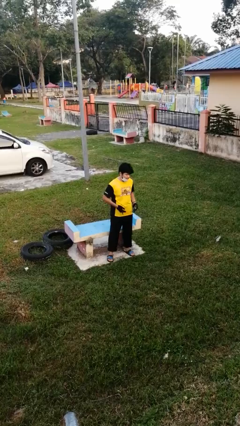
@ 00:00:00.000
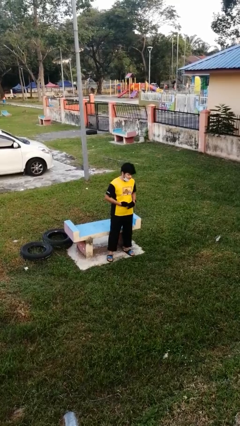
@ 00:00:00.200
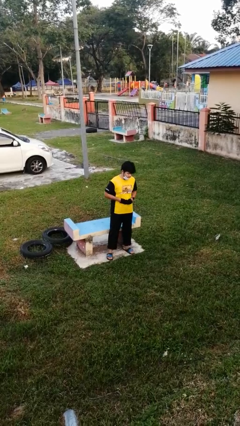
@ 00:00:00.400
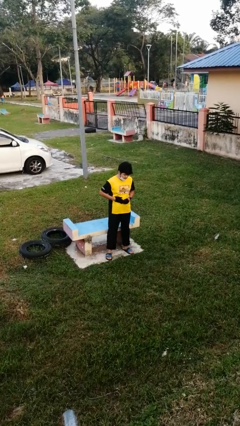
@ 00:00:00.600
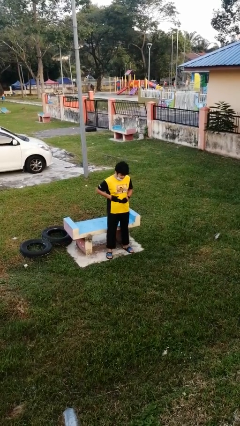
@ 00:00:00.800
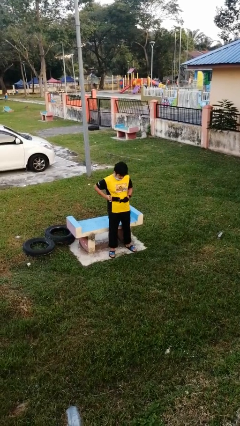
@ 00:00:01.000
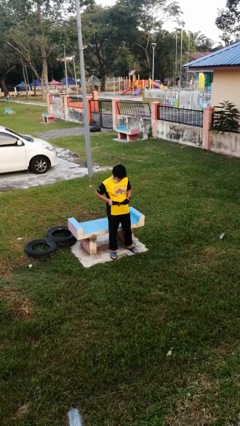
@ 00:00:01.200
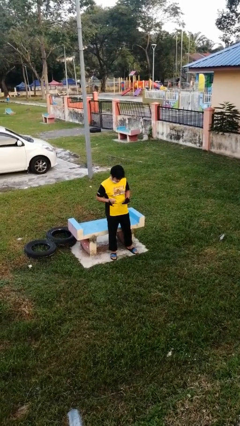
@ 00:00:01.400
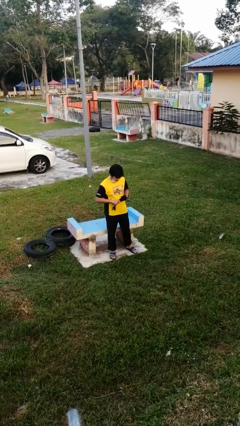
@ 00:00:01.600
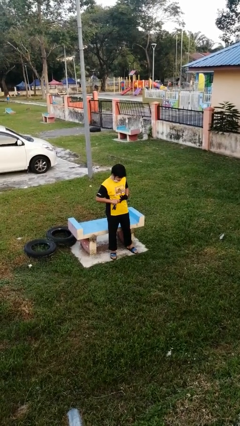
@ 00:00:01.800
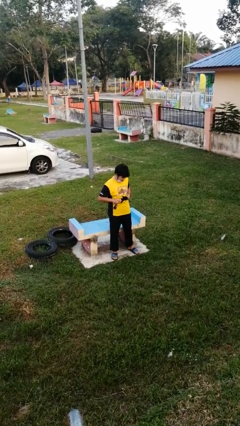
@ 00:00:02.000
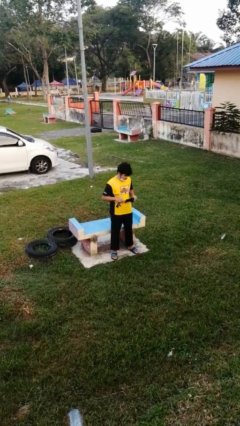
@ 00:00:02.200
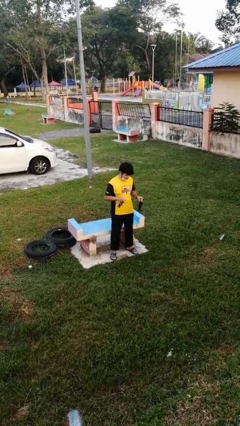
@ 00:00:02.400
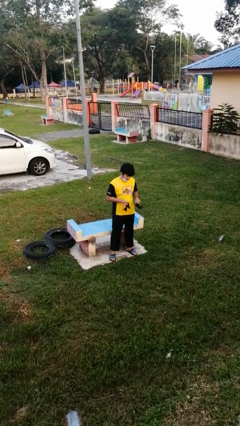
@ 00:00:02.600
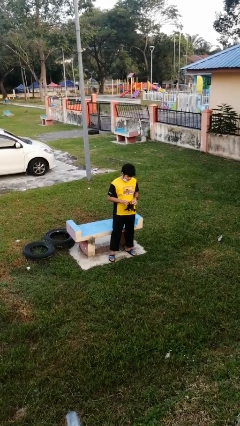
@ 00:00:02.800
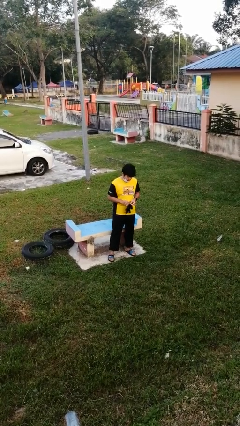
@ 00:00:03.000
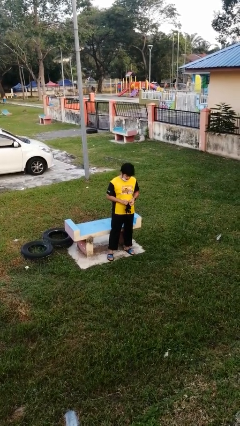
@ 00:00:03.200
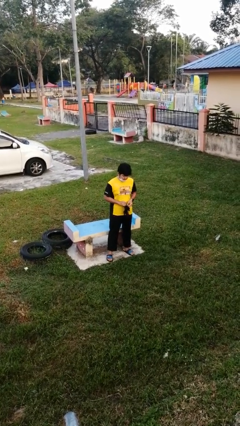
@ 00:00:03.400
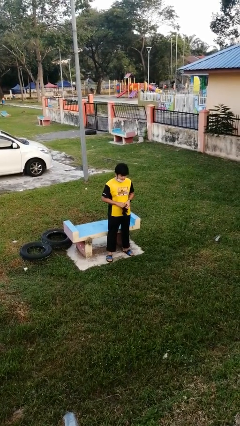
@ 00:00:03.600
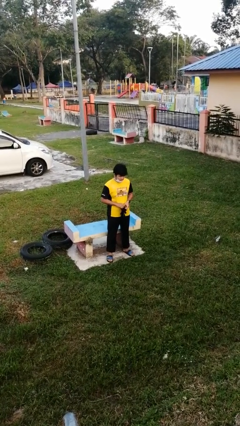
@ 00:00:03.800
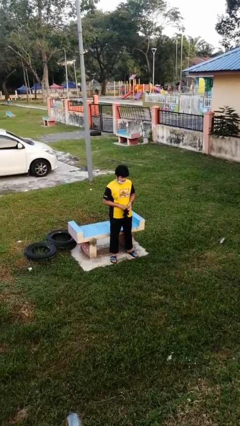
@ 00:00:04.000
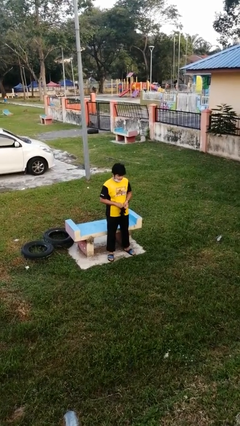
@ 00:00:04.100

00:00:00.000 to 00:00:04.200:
person takes off gloves

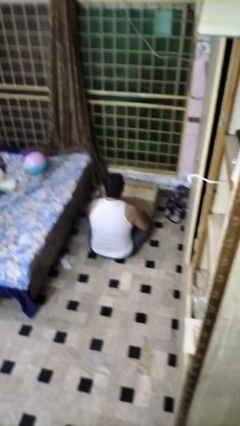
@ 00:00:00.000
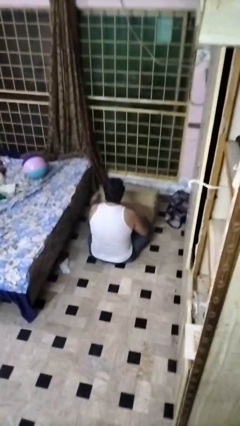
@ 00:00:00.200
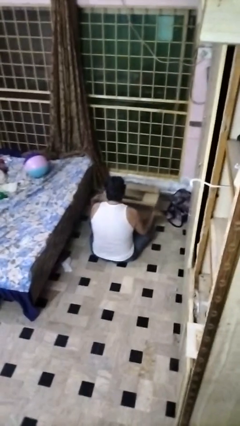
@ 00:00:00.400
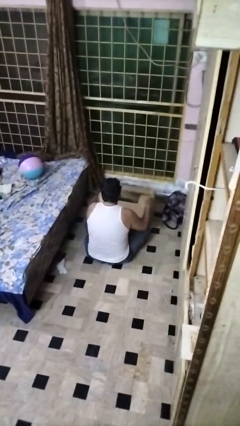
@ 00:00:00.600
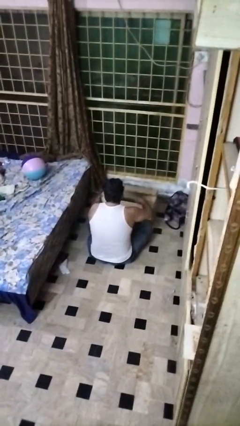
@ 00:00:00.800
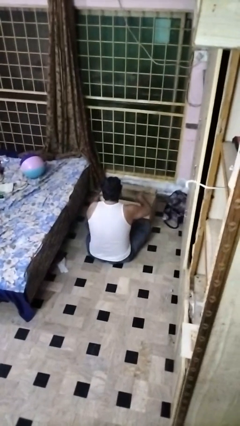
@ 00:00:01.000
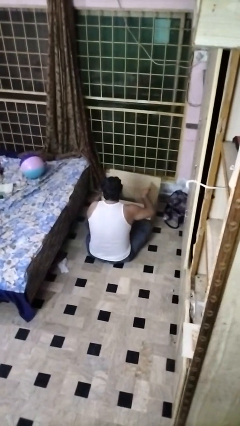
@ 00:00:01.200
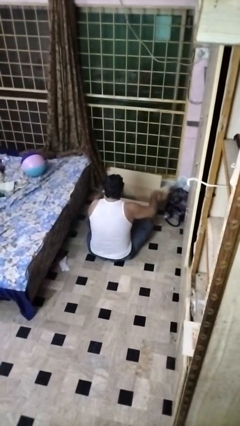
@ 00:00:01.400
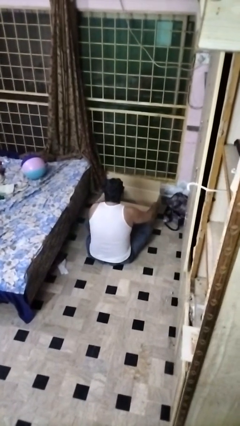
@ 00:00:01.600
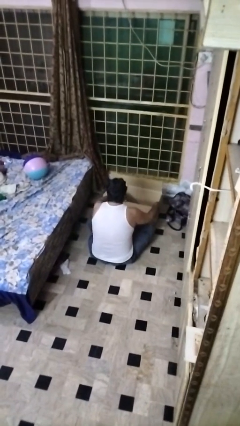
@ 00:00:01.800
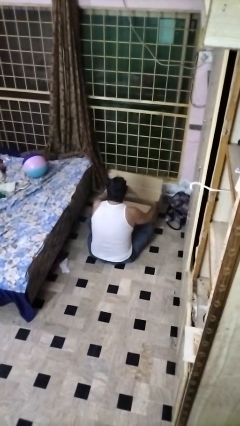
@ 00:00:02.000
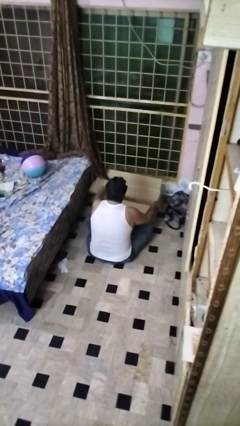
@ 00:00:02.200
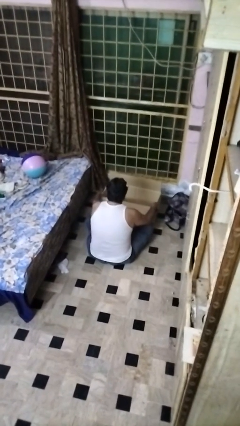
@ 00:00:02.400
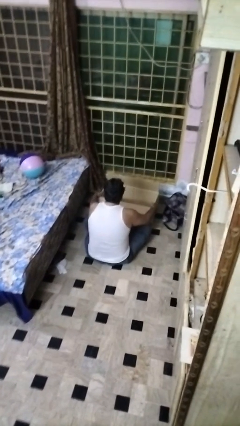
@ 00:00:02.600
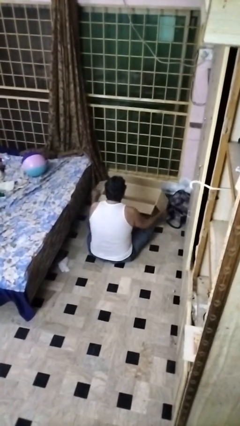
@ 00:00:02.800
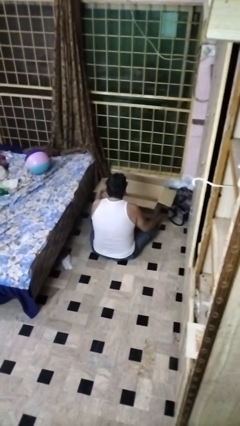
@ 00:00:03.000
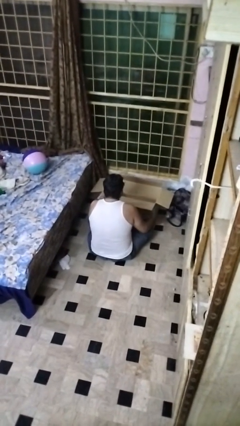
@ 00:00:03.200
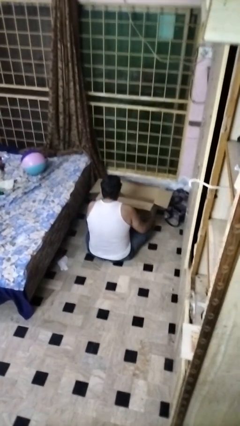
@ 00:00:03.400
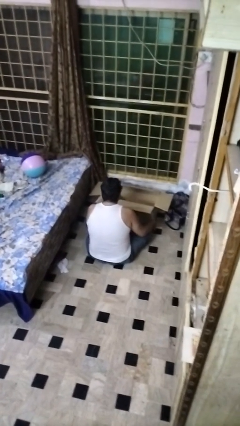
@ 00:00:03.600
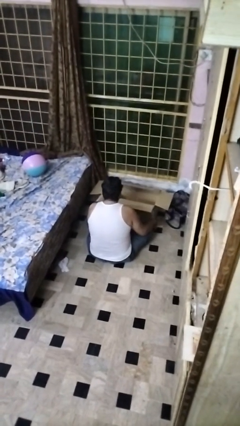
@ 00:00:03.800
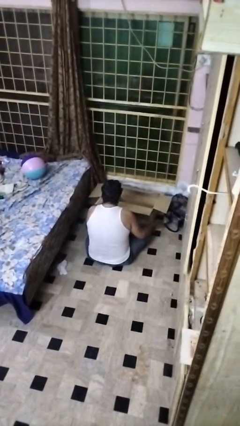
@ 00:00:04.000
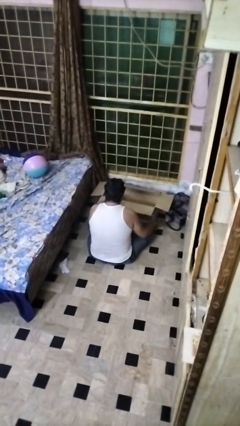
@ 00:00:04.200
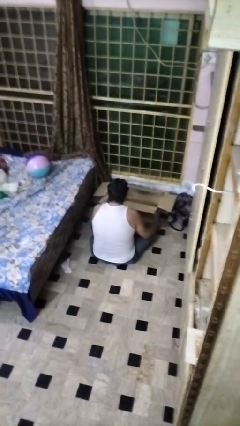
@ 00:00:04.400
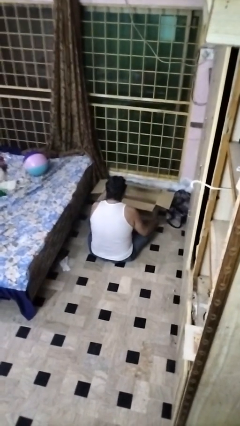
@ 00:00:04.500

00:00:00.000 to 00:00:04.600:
person opens box

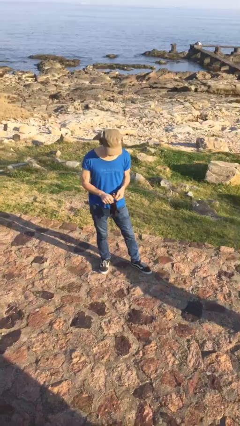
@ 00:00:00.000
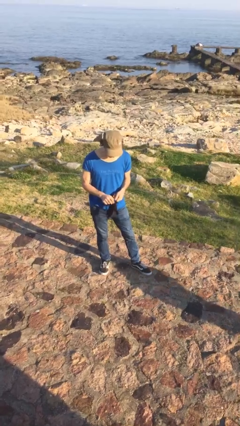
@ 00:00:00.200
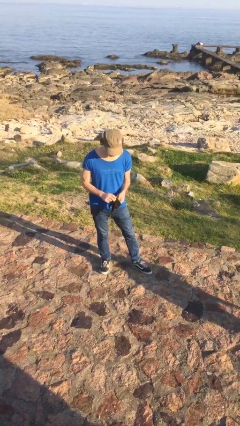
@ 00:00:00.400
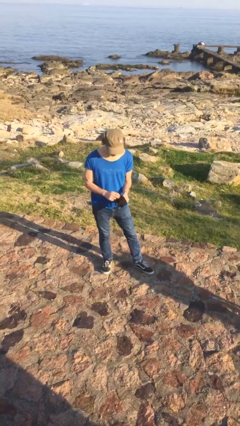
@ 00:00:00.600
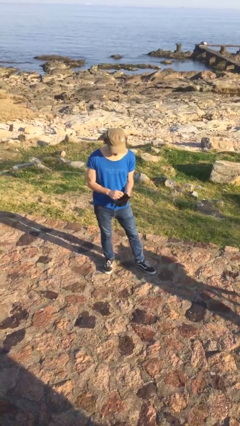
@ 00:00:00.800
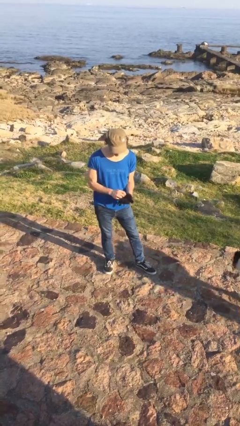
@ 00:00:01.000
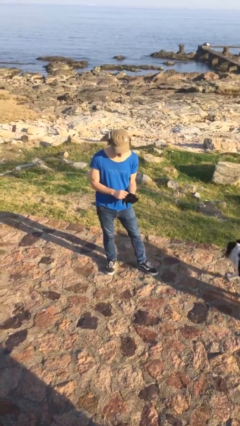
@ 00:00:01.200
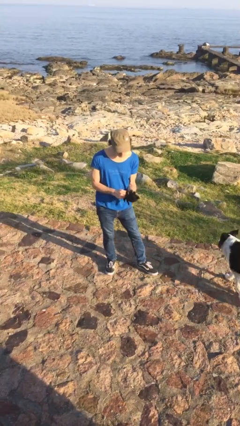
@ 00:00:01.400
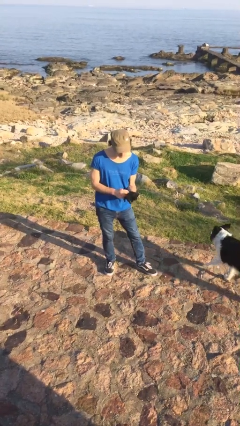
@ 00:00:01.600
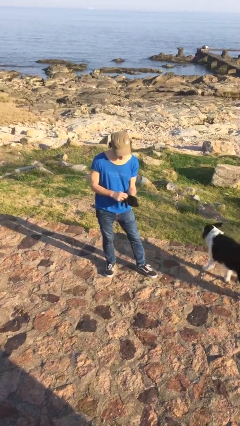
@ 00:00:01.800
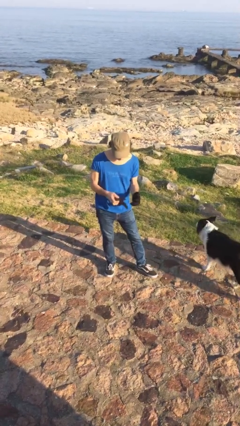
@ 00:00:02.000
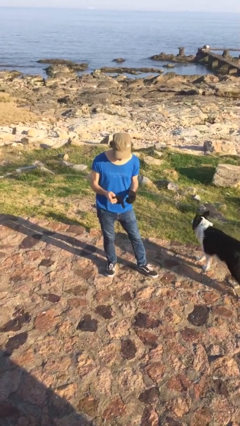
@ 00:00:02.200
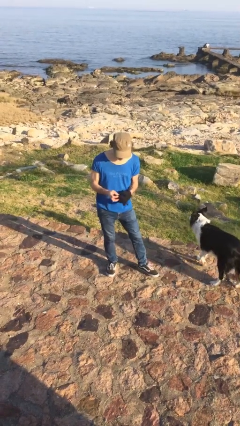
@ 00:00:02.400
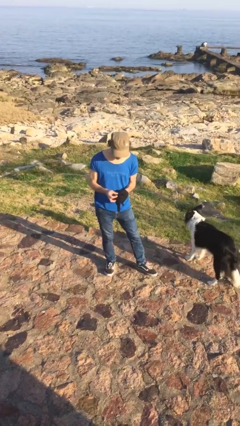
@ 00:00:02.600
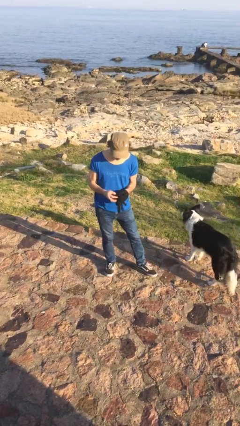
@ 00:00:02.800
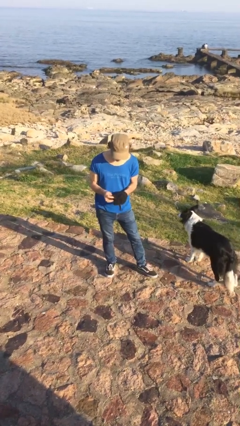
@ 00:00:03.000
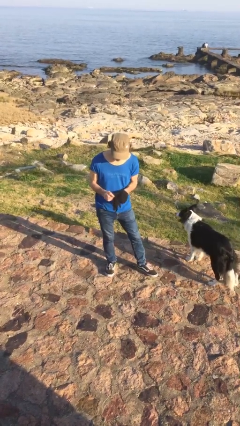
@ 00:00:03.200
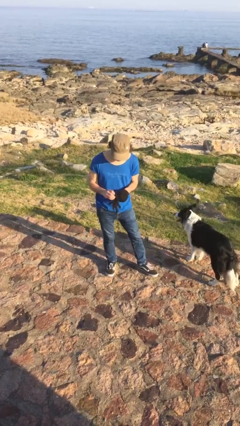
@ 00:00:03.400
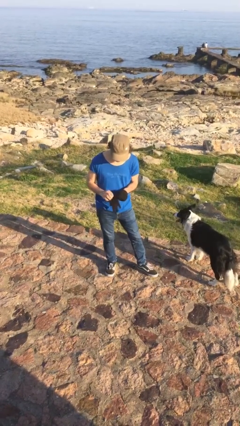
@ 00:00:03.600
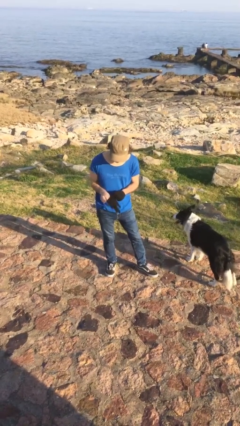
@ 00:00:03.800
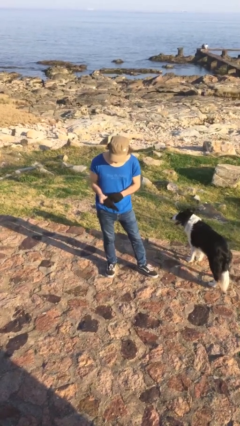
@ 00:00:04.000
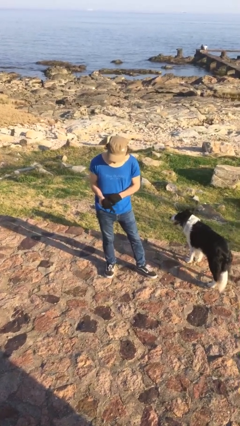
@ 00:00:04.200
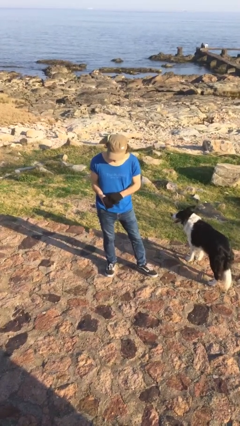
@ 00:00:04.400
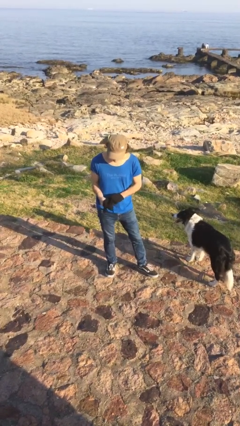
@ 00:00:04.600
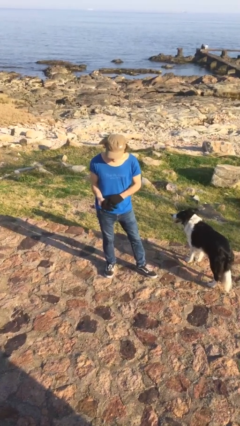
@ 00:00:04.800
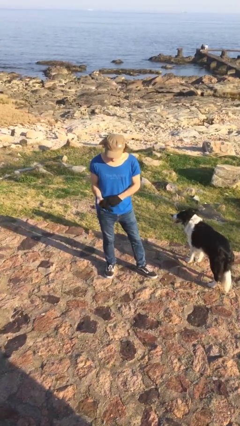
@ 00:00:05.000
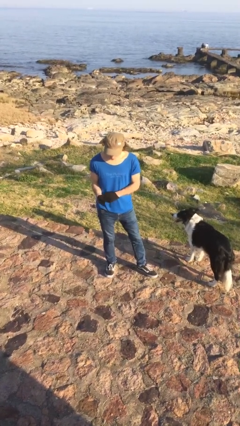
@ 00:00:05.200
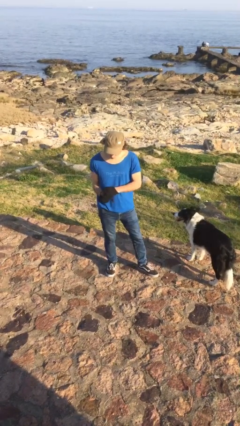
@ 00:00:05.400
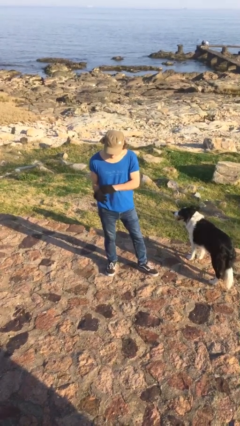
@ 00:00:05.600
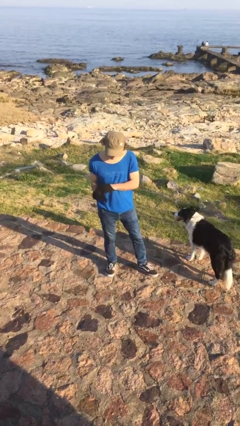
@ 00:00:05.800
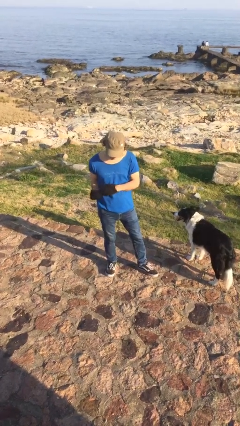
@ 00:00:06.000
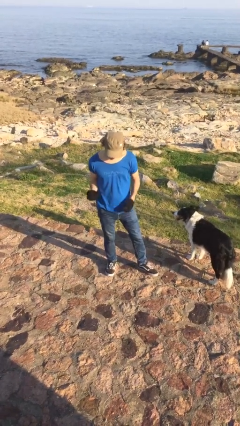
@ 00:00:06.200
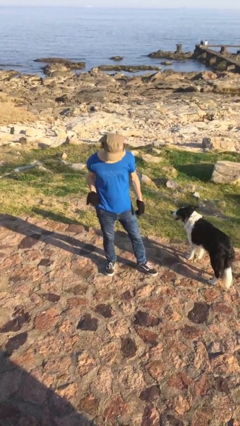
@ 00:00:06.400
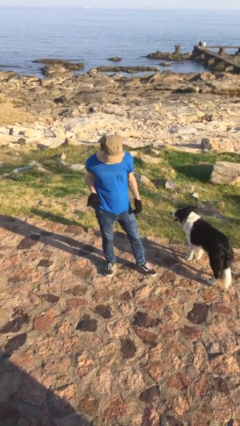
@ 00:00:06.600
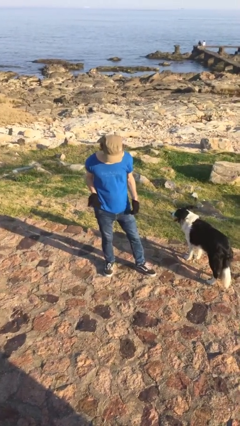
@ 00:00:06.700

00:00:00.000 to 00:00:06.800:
person puts on gloves

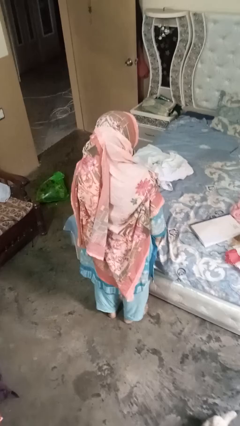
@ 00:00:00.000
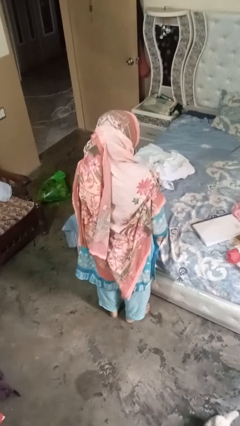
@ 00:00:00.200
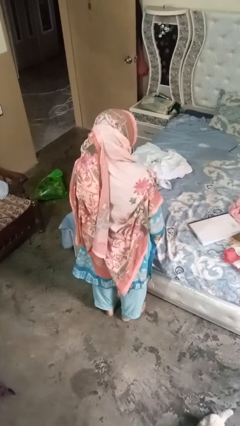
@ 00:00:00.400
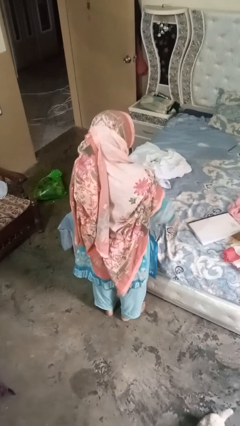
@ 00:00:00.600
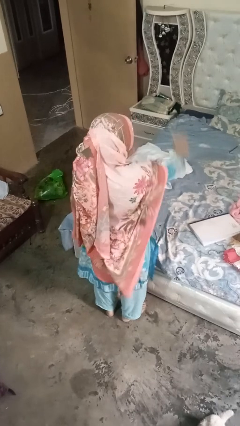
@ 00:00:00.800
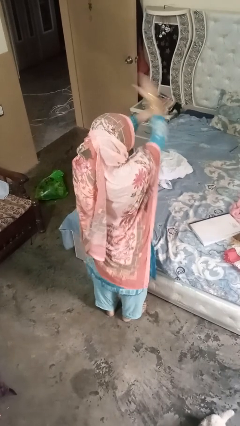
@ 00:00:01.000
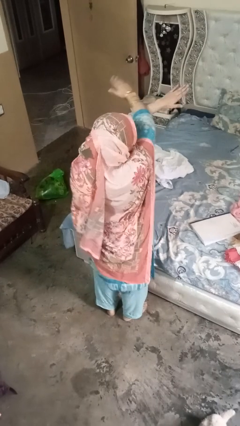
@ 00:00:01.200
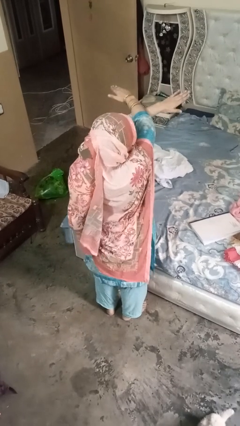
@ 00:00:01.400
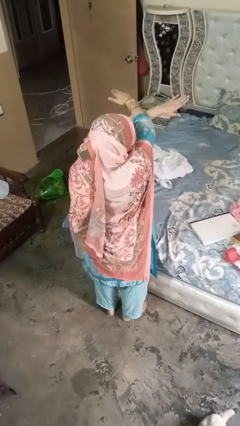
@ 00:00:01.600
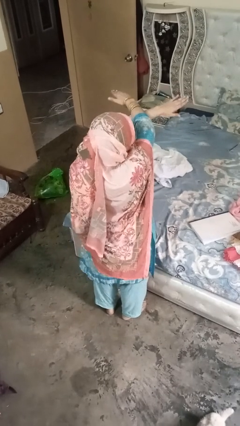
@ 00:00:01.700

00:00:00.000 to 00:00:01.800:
person gestures arms x
